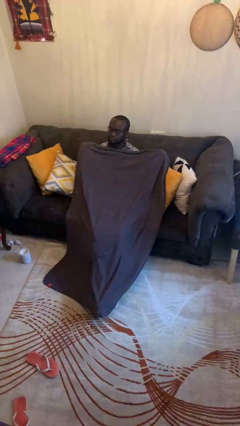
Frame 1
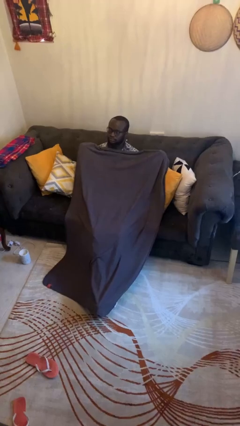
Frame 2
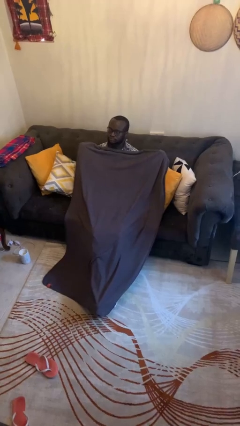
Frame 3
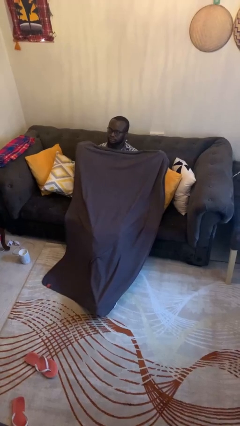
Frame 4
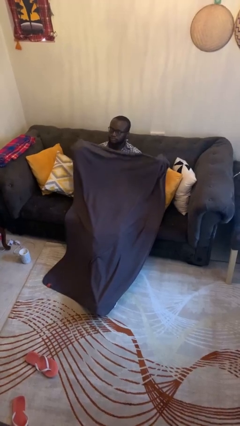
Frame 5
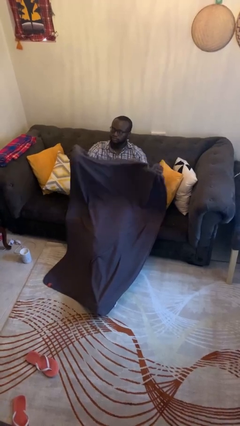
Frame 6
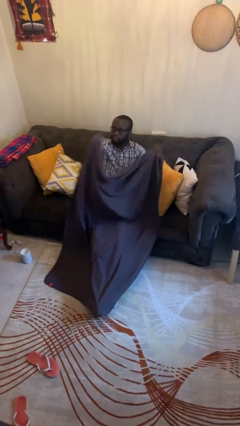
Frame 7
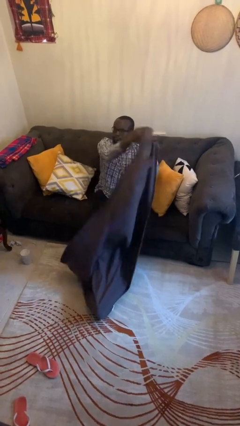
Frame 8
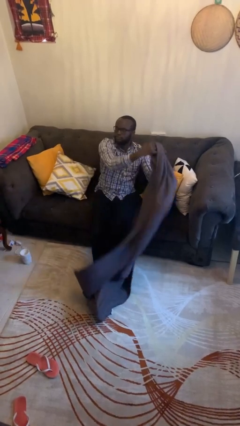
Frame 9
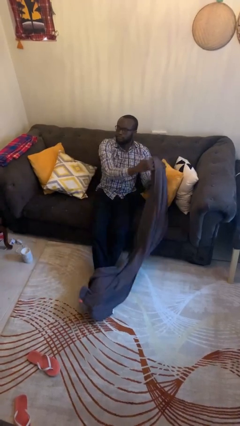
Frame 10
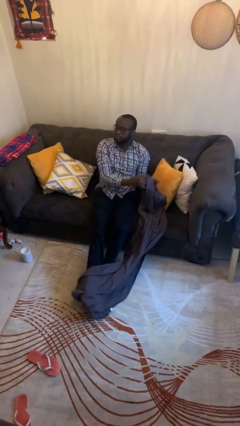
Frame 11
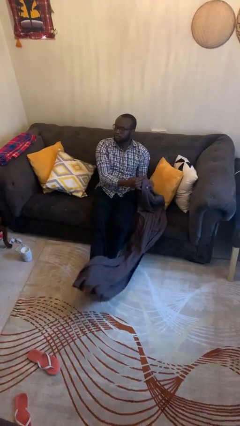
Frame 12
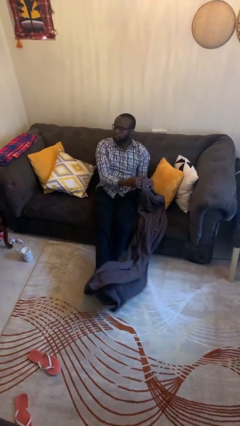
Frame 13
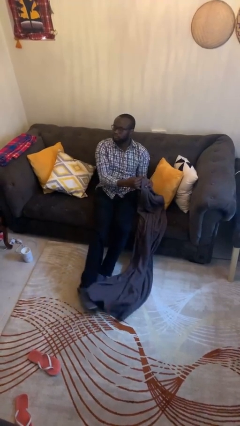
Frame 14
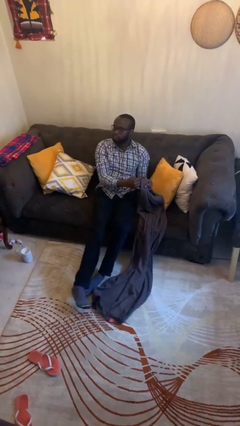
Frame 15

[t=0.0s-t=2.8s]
person uncovers with blanket

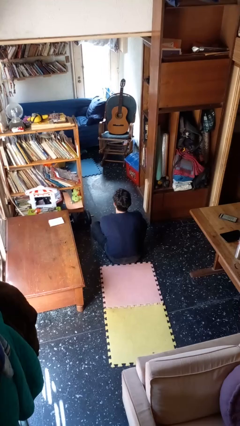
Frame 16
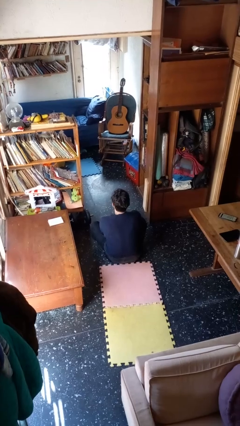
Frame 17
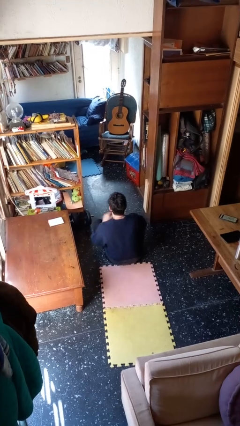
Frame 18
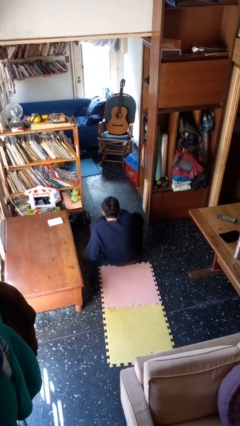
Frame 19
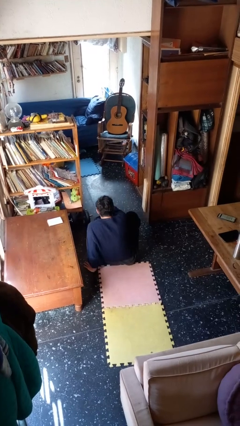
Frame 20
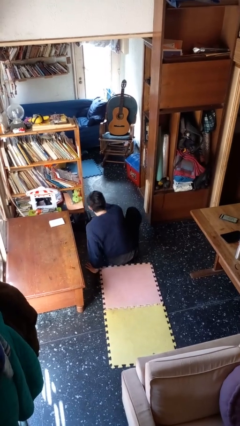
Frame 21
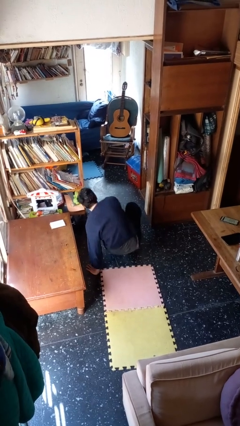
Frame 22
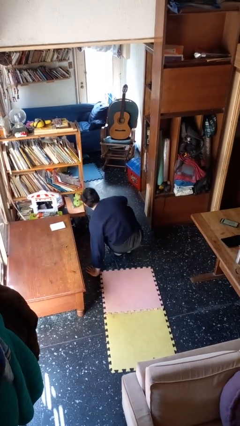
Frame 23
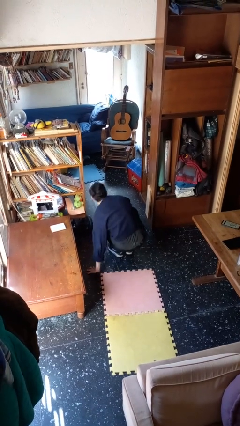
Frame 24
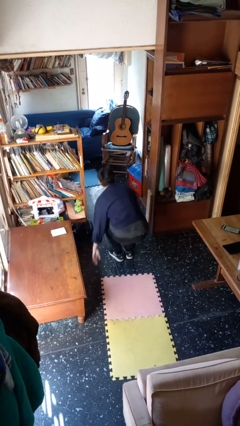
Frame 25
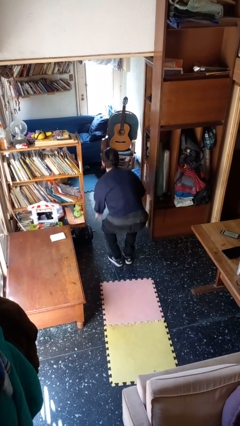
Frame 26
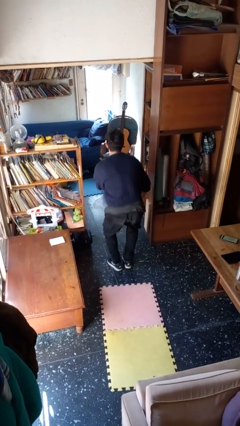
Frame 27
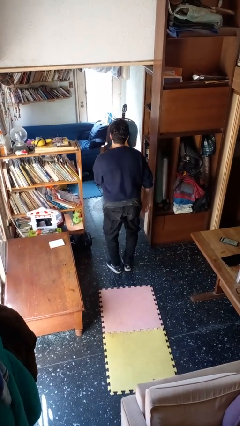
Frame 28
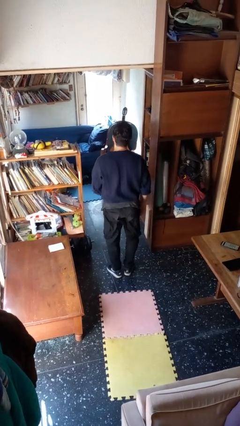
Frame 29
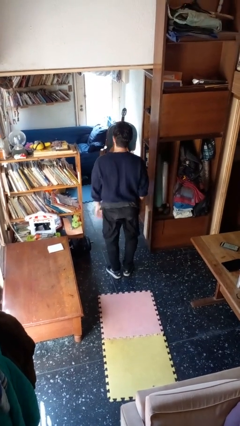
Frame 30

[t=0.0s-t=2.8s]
person stands up from floor

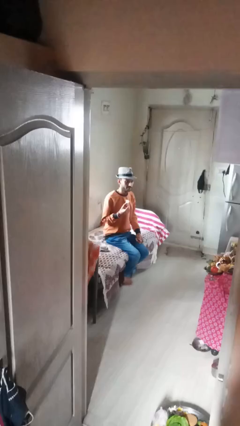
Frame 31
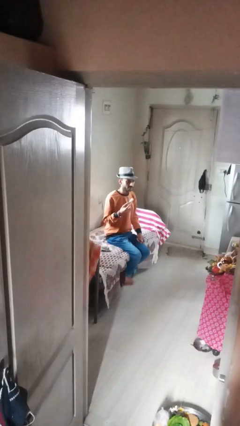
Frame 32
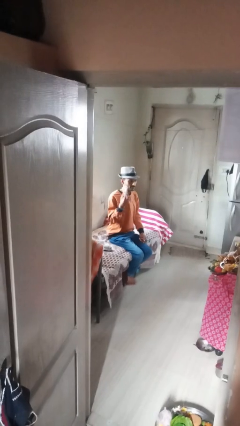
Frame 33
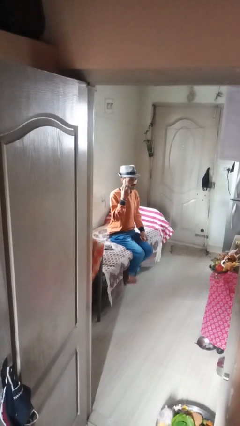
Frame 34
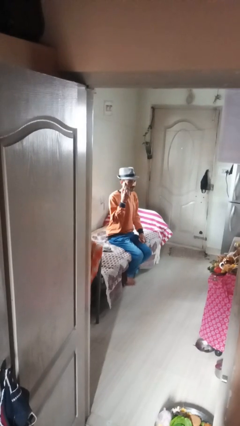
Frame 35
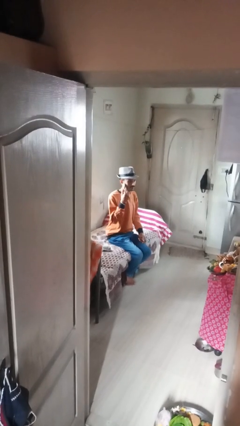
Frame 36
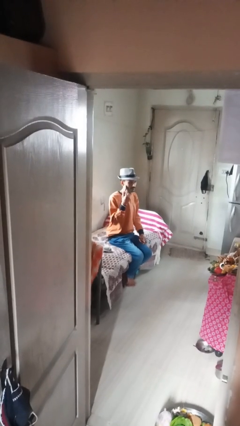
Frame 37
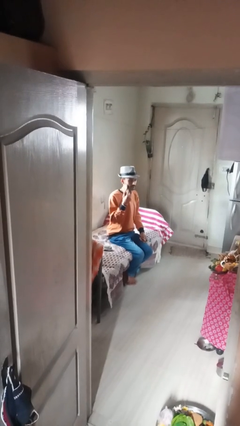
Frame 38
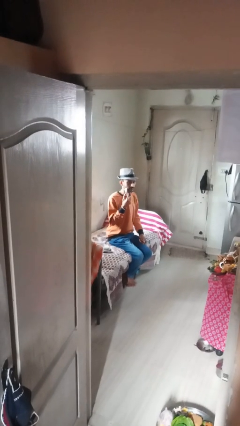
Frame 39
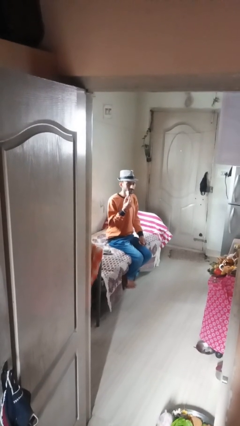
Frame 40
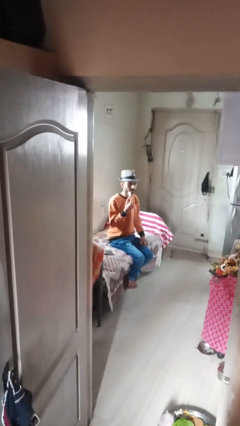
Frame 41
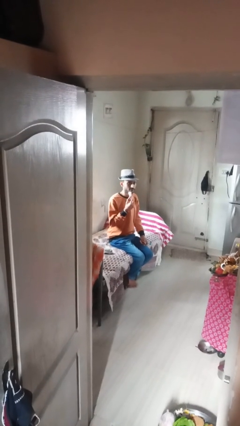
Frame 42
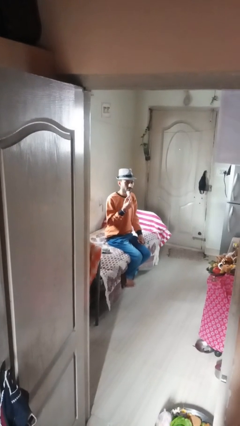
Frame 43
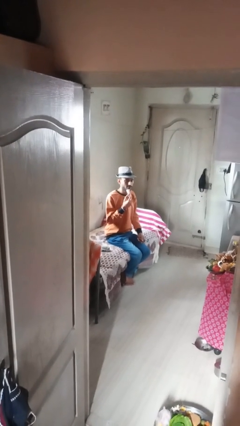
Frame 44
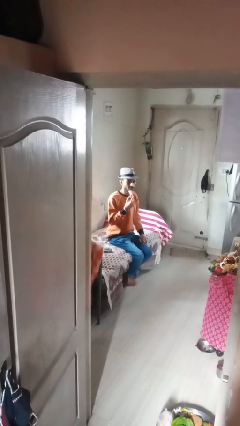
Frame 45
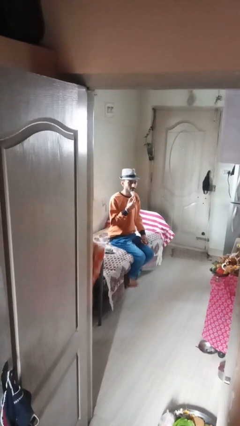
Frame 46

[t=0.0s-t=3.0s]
person applies shaving cream

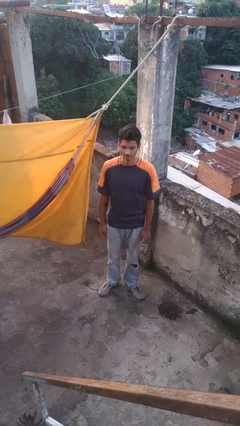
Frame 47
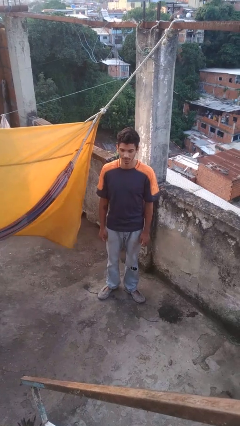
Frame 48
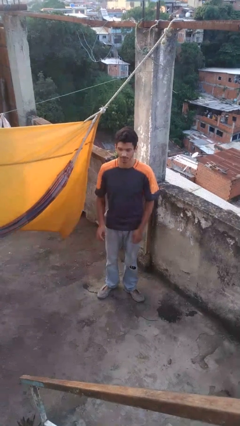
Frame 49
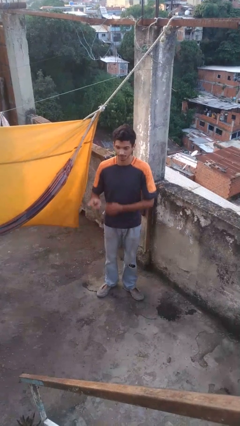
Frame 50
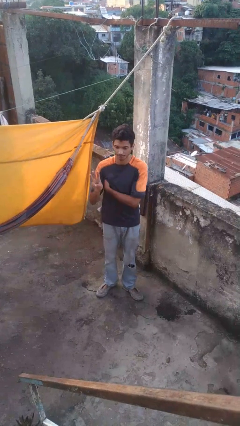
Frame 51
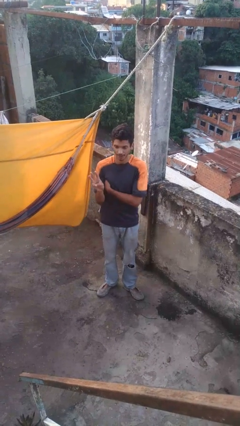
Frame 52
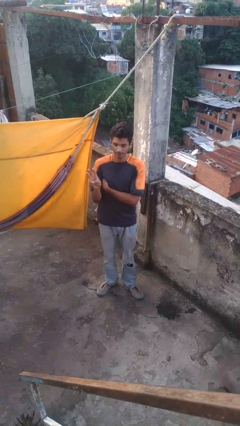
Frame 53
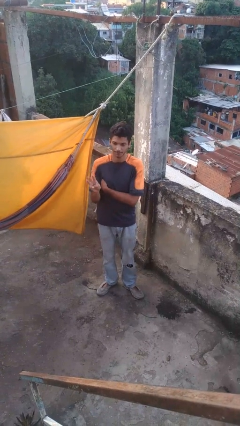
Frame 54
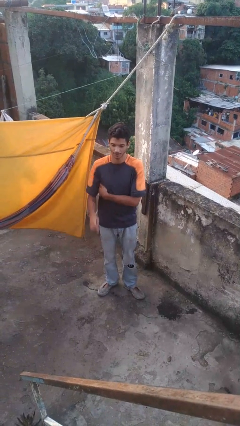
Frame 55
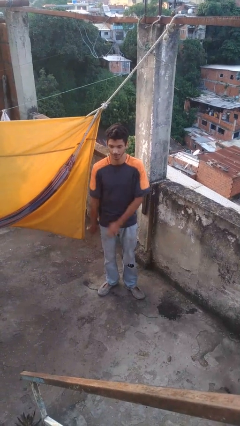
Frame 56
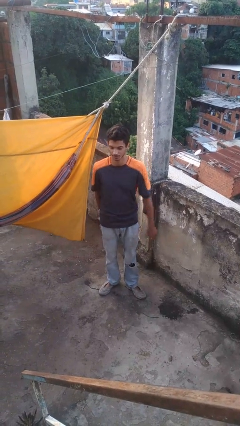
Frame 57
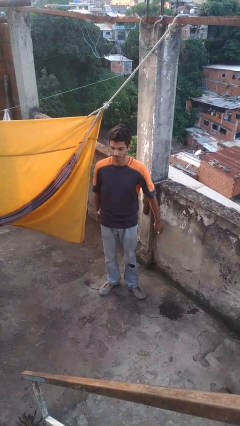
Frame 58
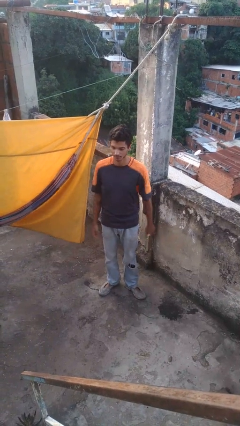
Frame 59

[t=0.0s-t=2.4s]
person gestures number three

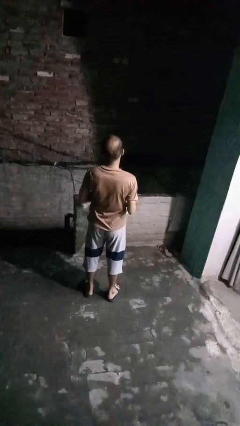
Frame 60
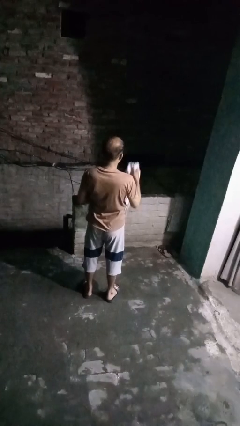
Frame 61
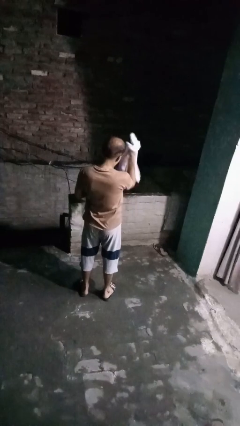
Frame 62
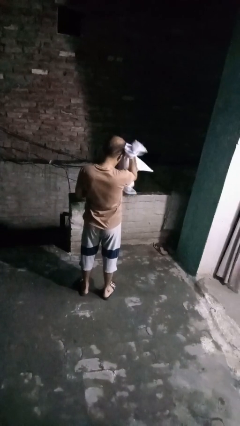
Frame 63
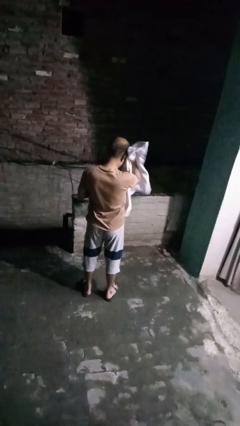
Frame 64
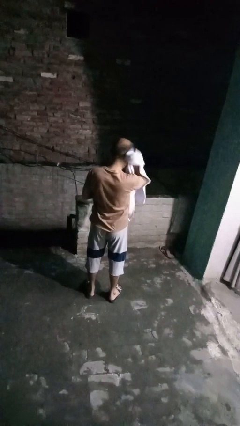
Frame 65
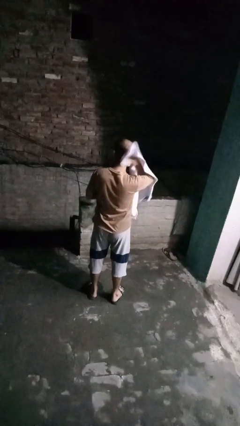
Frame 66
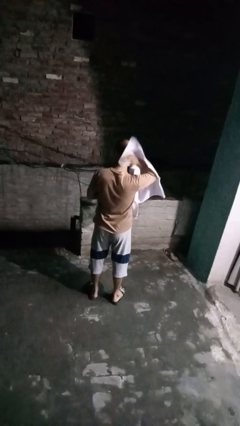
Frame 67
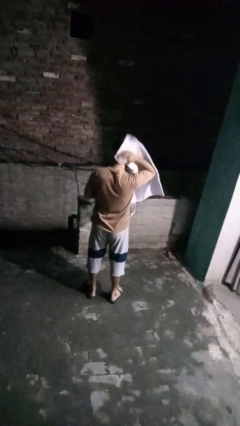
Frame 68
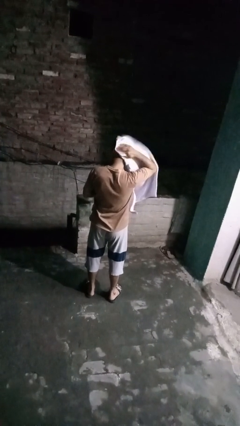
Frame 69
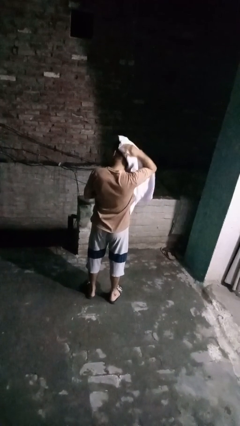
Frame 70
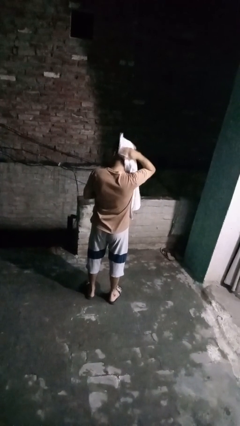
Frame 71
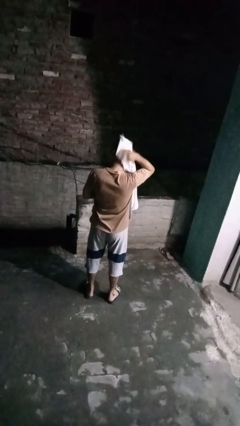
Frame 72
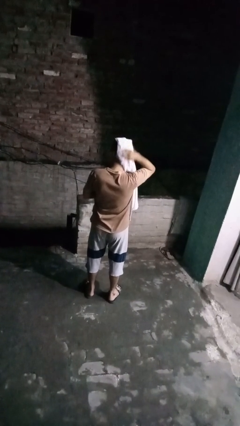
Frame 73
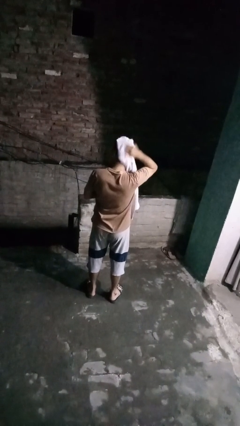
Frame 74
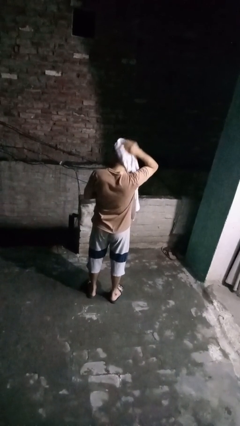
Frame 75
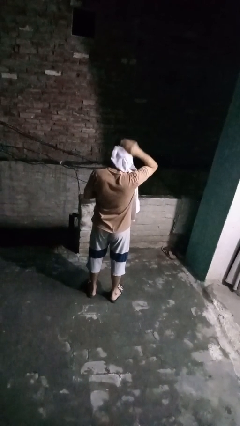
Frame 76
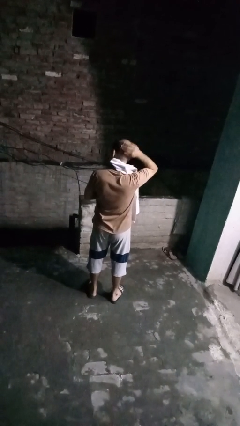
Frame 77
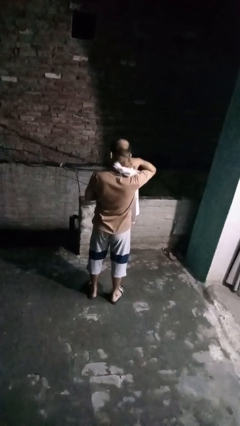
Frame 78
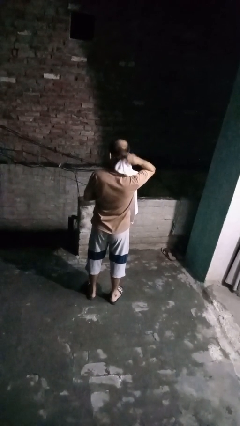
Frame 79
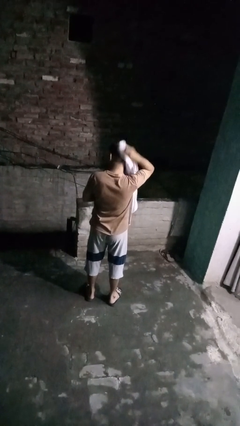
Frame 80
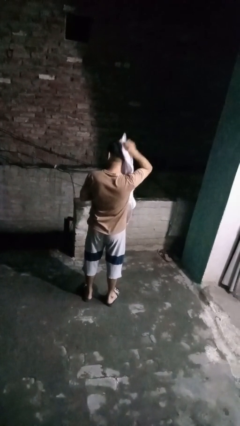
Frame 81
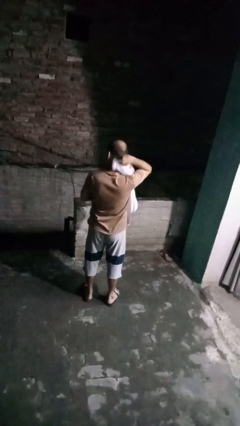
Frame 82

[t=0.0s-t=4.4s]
person dries hair with towel

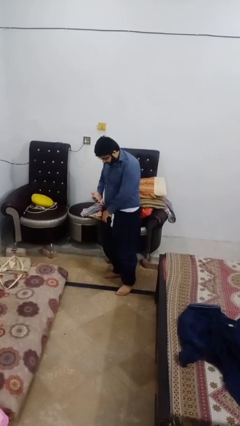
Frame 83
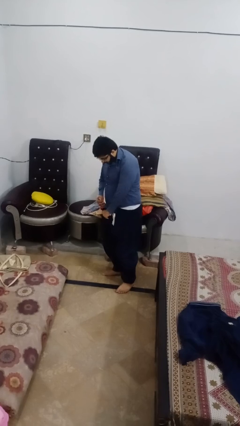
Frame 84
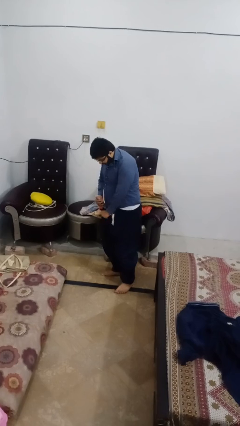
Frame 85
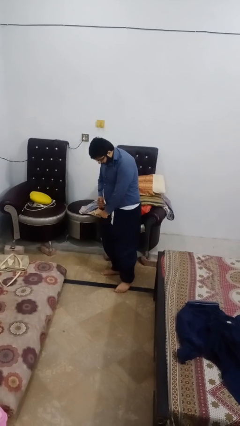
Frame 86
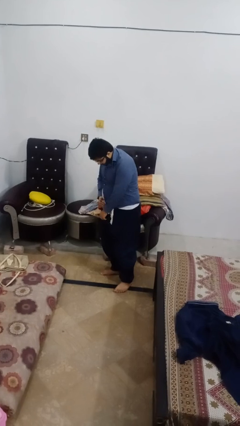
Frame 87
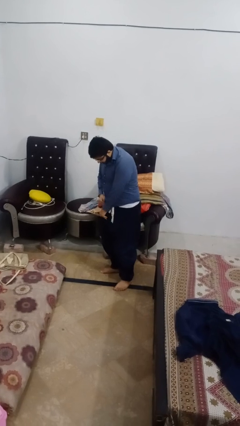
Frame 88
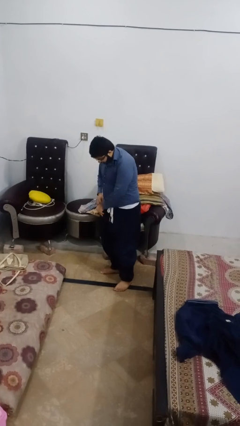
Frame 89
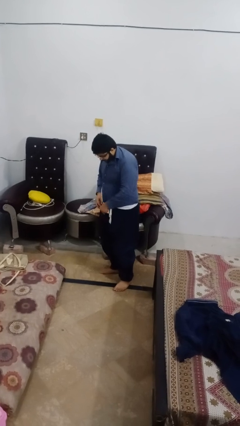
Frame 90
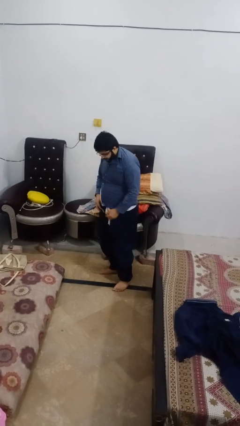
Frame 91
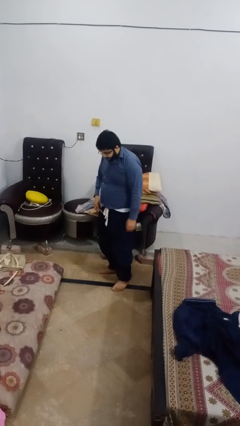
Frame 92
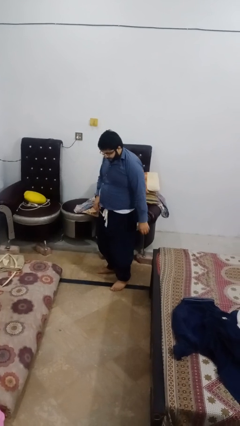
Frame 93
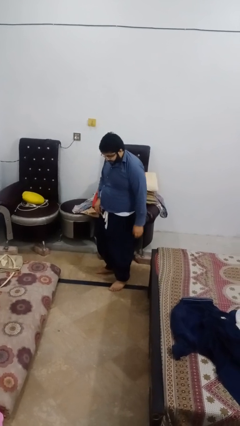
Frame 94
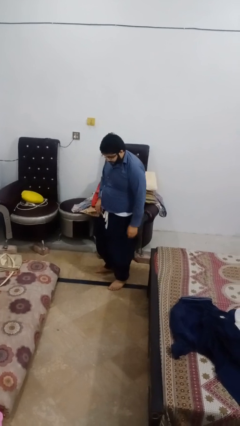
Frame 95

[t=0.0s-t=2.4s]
person puts phone into pocket
